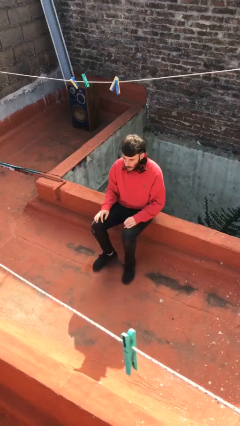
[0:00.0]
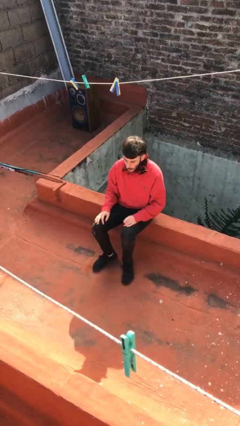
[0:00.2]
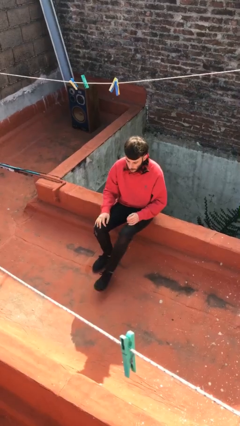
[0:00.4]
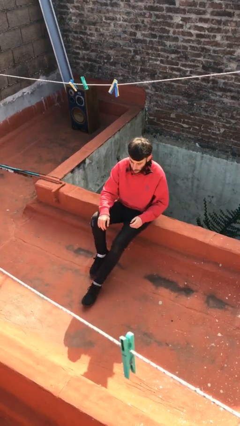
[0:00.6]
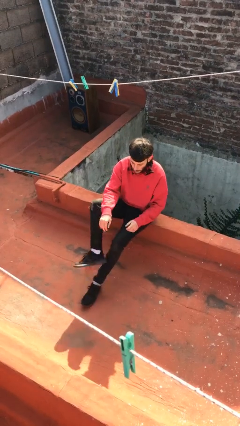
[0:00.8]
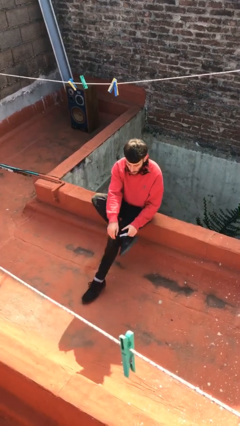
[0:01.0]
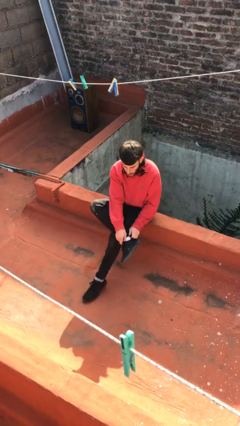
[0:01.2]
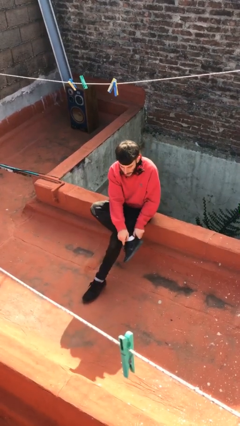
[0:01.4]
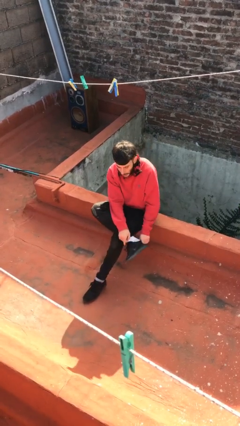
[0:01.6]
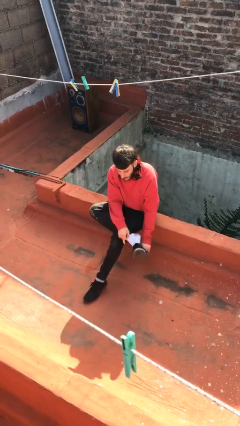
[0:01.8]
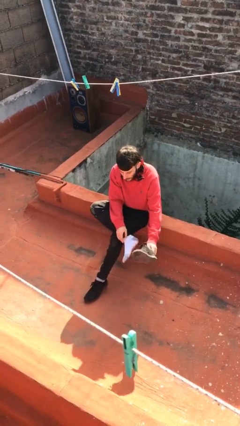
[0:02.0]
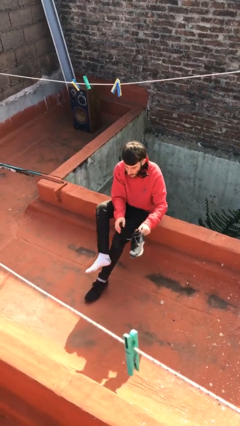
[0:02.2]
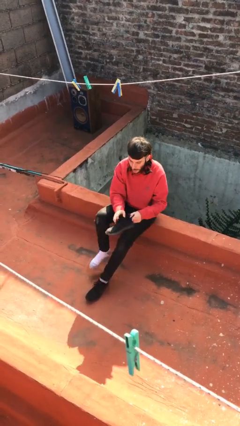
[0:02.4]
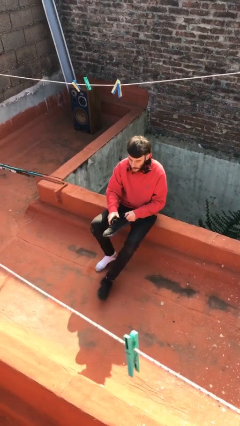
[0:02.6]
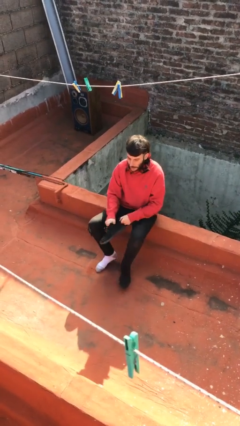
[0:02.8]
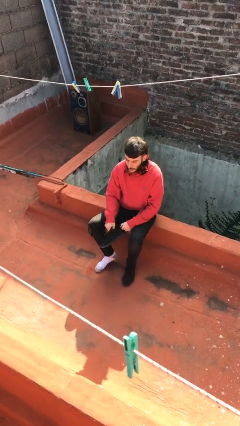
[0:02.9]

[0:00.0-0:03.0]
person takes off shoes

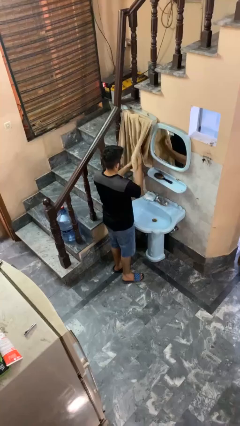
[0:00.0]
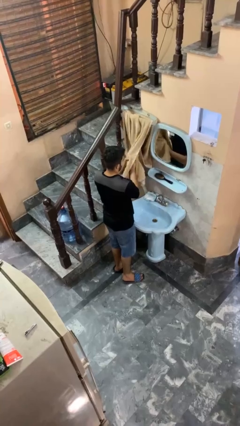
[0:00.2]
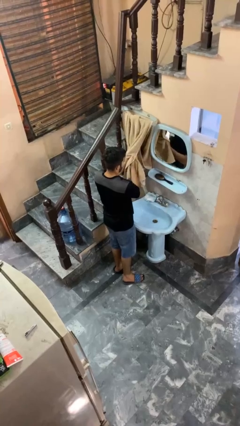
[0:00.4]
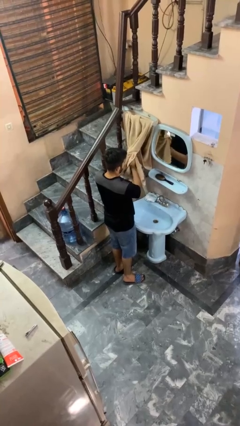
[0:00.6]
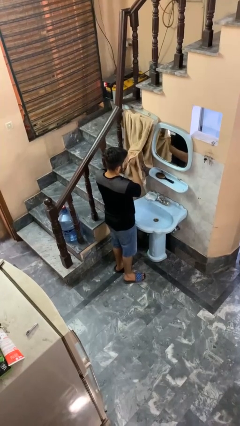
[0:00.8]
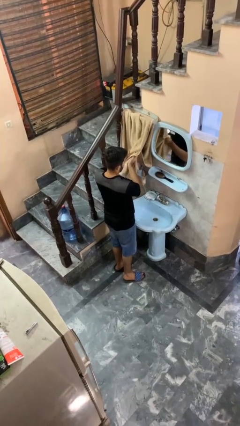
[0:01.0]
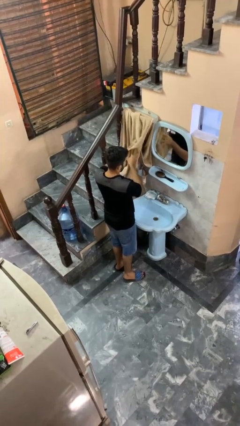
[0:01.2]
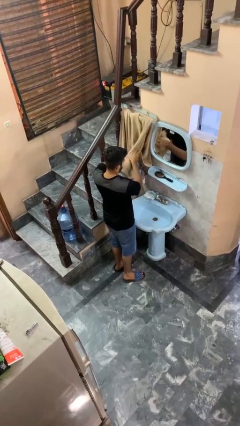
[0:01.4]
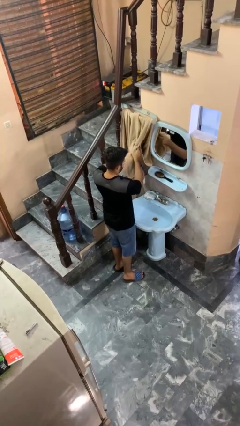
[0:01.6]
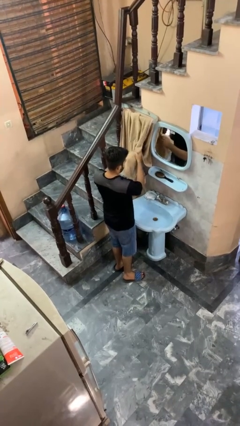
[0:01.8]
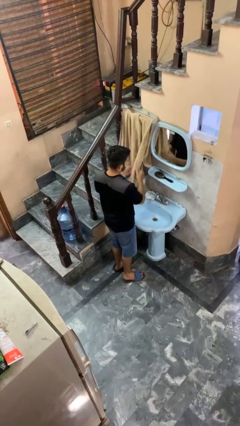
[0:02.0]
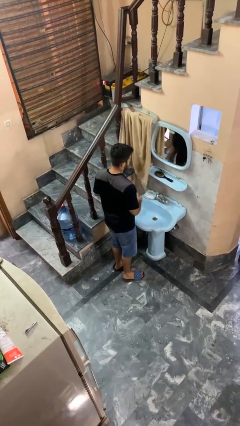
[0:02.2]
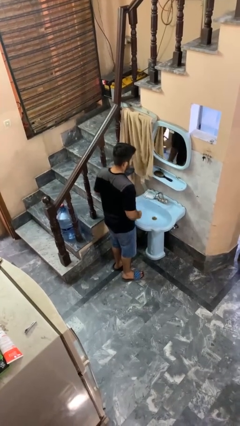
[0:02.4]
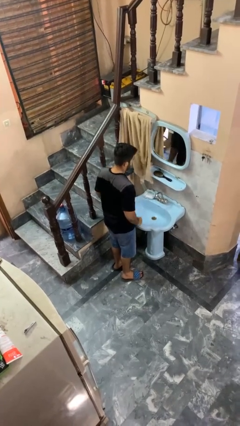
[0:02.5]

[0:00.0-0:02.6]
person dries hands with towel

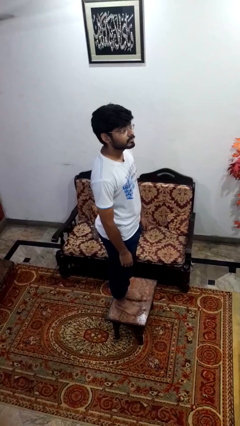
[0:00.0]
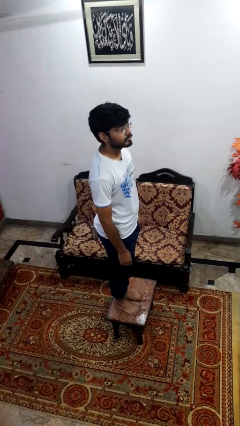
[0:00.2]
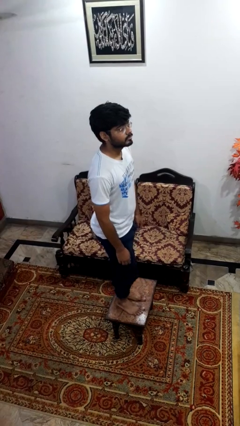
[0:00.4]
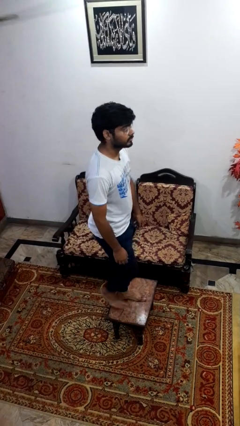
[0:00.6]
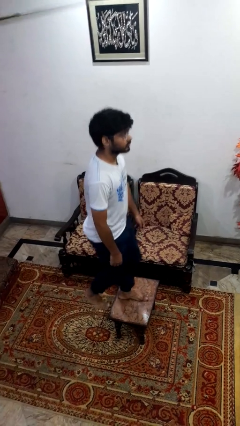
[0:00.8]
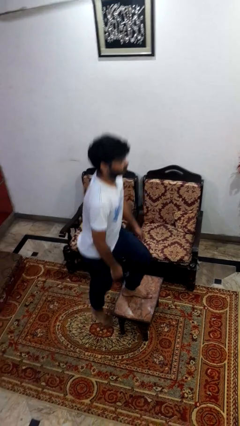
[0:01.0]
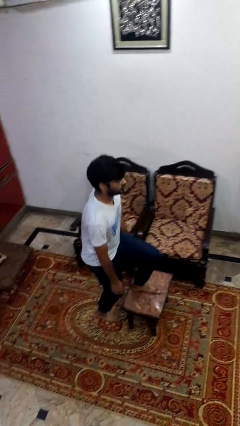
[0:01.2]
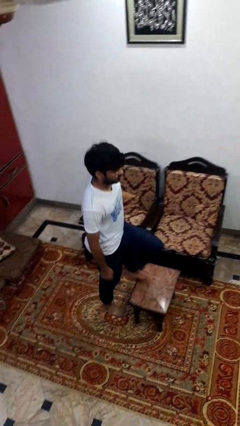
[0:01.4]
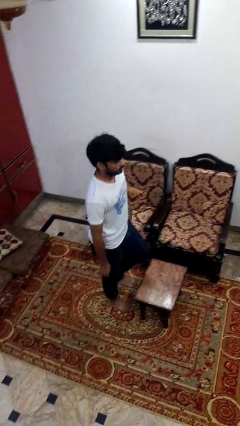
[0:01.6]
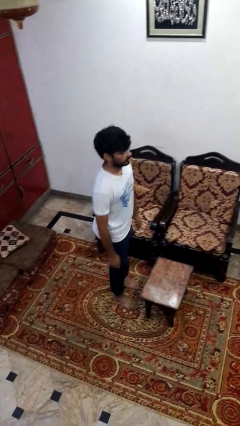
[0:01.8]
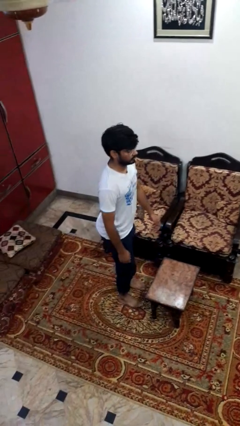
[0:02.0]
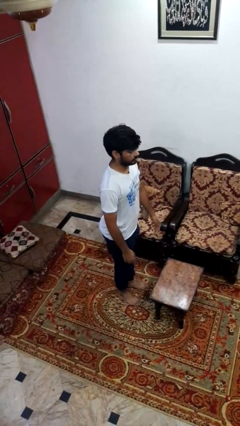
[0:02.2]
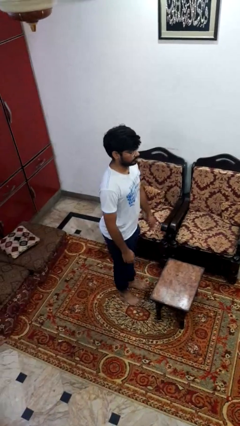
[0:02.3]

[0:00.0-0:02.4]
person climbs off table

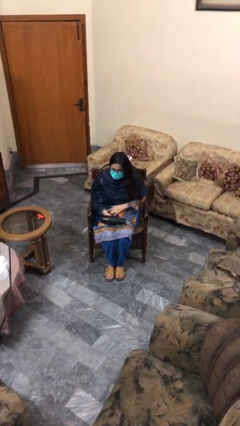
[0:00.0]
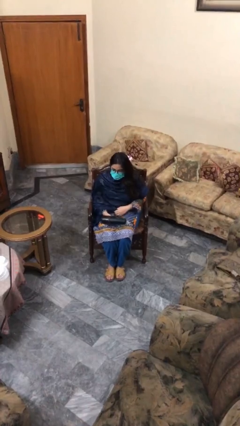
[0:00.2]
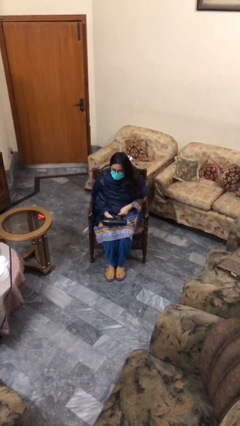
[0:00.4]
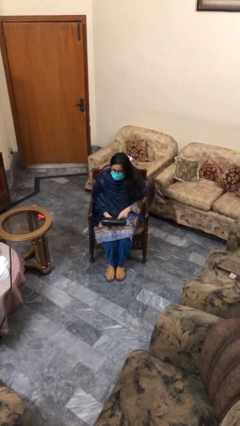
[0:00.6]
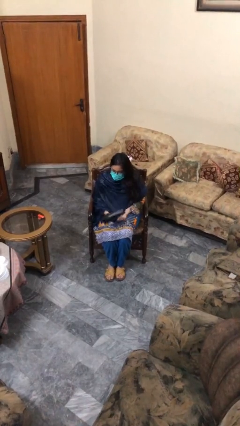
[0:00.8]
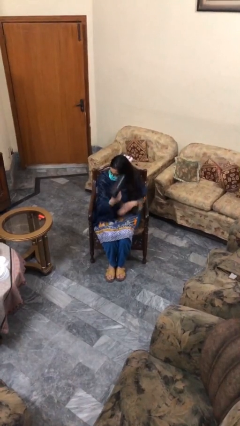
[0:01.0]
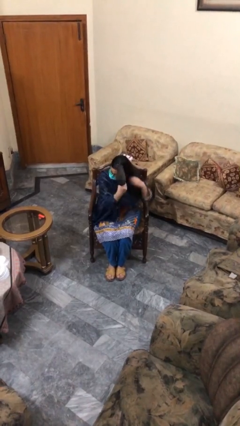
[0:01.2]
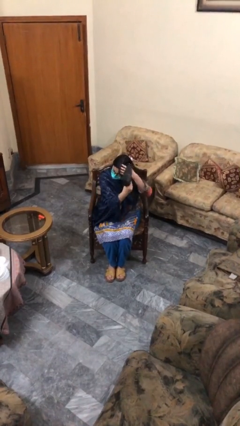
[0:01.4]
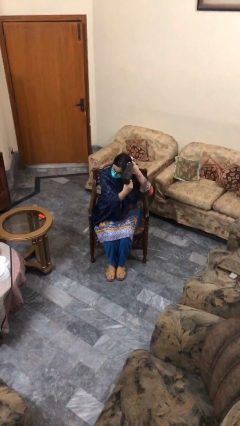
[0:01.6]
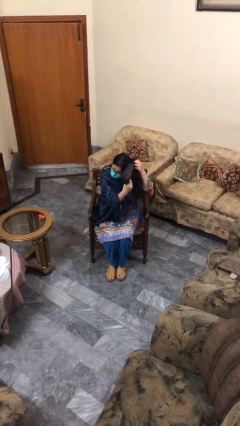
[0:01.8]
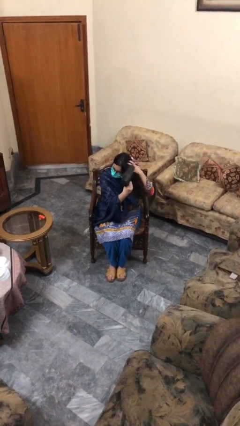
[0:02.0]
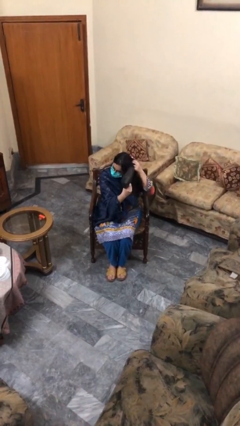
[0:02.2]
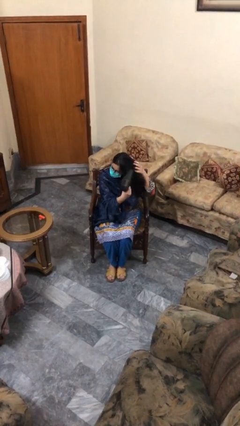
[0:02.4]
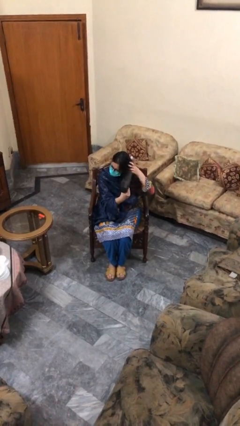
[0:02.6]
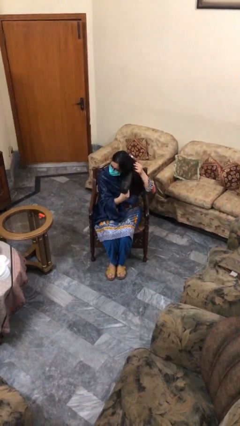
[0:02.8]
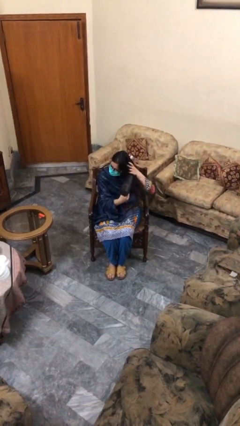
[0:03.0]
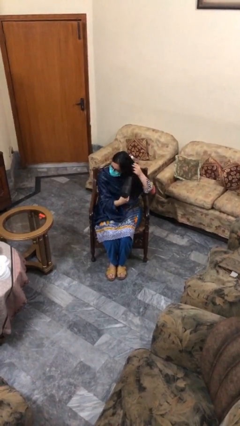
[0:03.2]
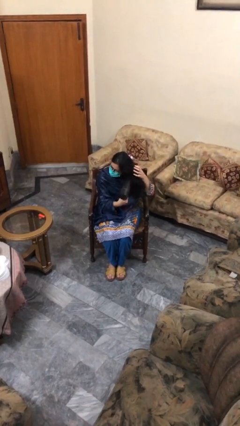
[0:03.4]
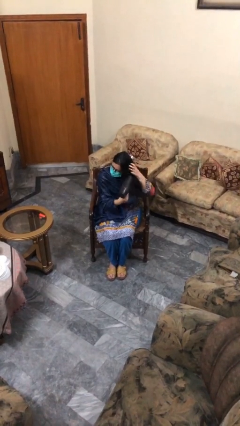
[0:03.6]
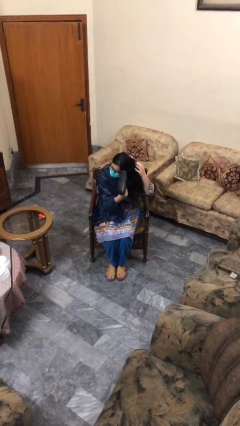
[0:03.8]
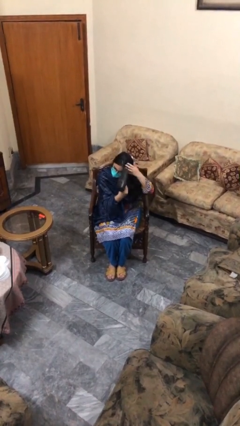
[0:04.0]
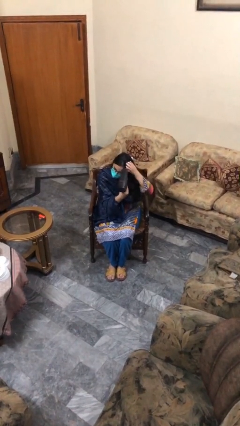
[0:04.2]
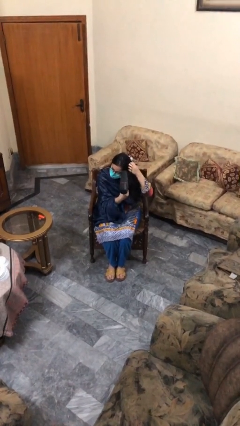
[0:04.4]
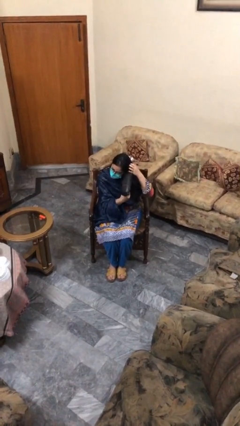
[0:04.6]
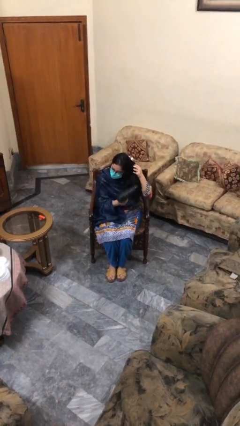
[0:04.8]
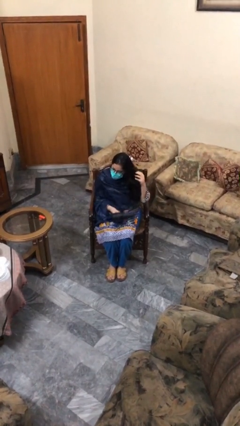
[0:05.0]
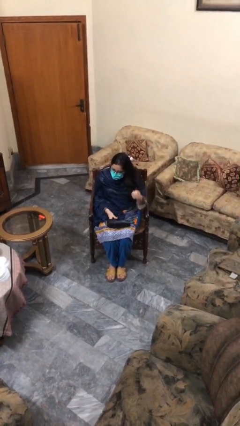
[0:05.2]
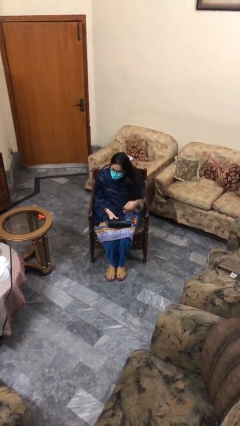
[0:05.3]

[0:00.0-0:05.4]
person dries hair with hairdryer

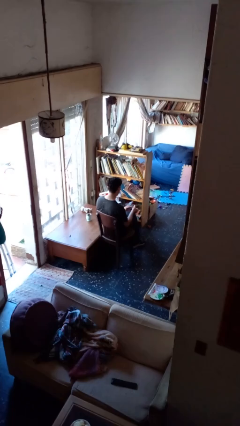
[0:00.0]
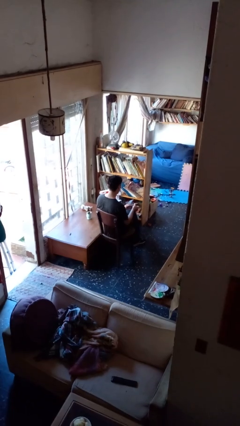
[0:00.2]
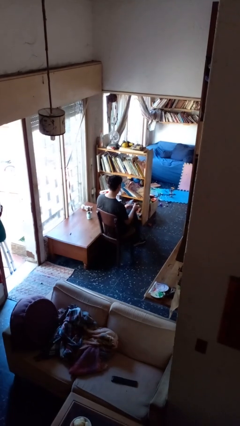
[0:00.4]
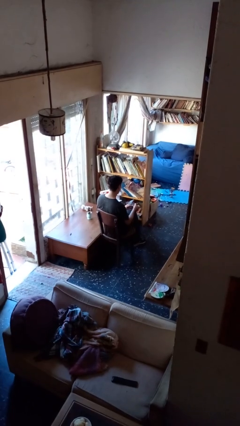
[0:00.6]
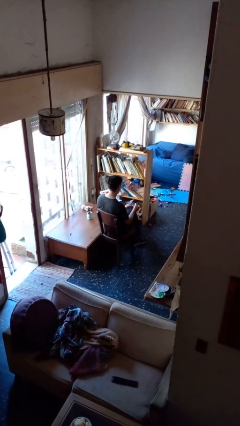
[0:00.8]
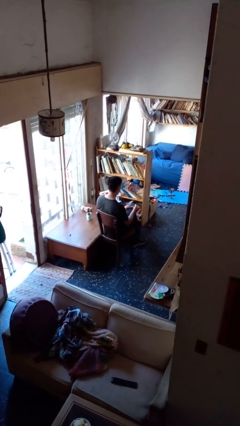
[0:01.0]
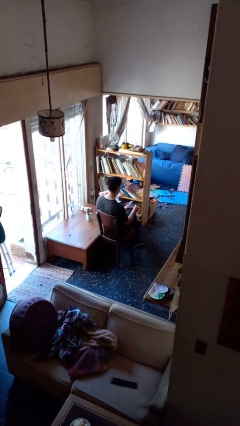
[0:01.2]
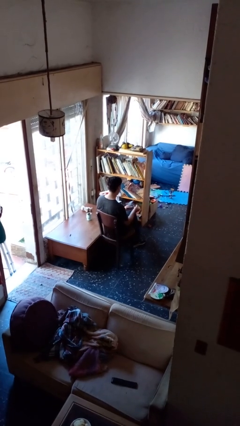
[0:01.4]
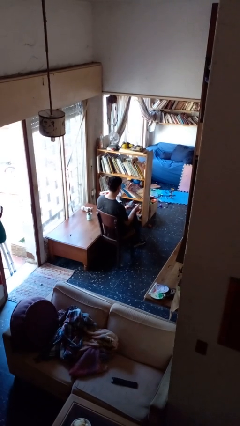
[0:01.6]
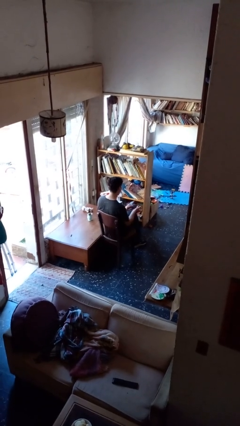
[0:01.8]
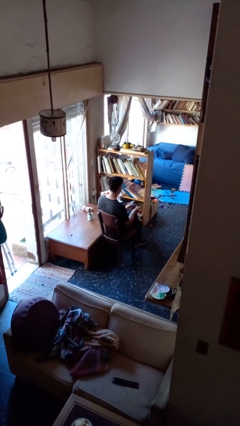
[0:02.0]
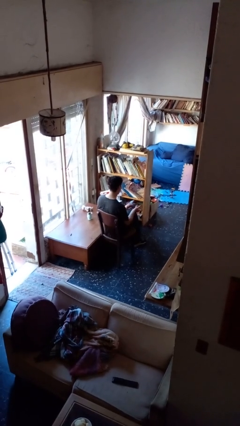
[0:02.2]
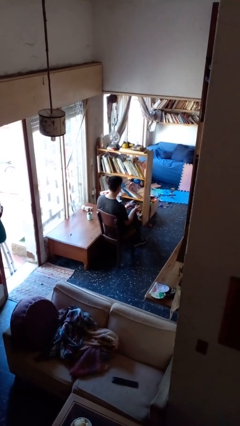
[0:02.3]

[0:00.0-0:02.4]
person clips fingernails

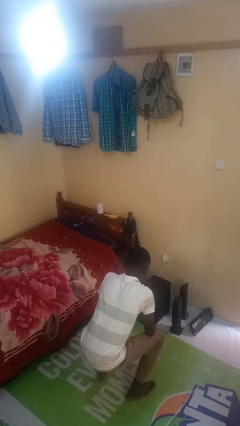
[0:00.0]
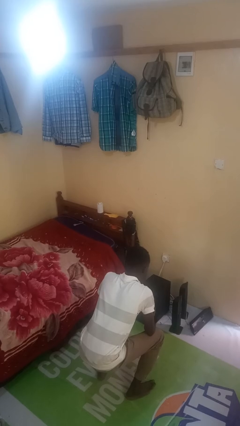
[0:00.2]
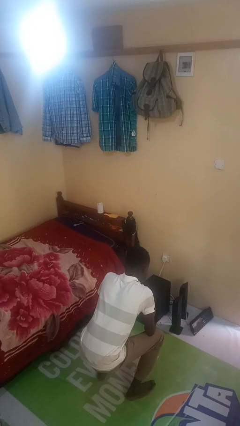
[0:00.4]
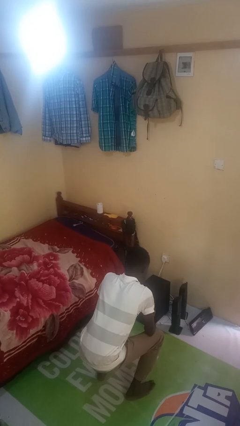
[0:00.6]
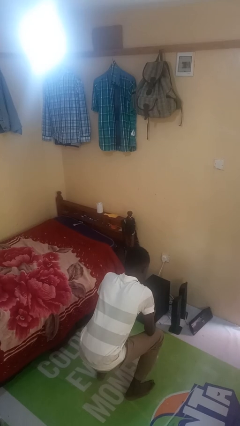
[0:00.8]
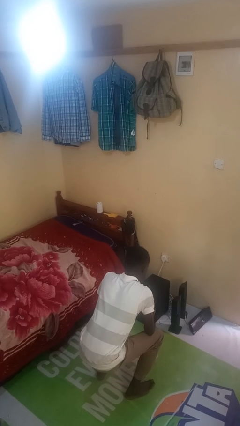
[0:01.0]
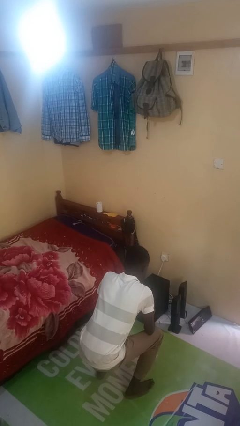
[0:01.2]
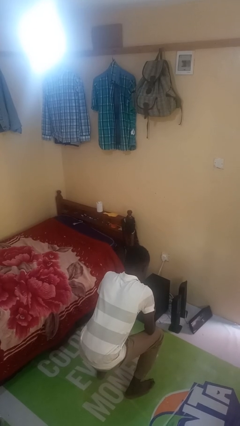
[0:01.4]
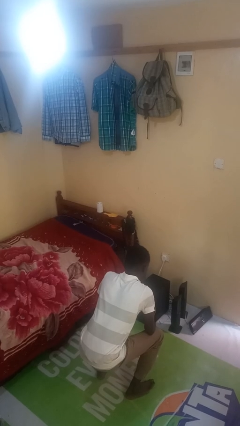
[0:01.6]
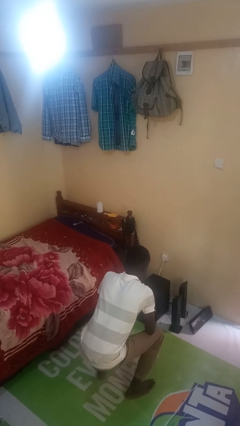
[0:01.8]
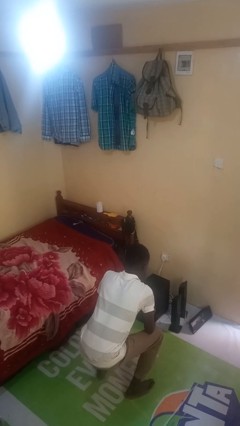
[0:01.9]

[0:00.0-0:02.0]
person squats

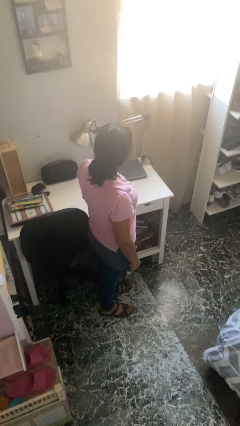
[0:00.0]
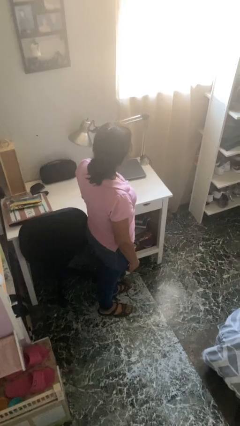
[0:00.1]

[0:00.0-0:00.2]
person opens dresser drawer
